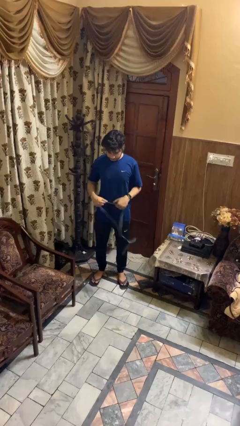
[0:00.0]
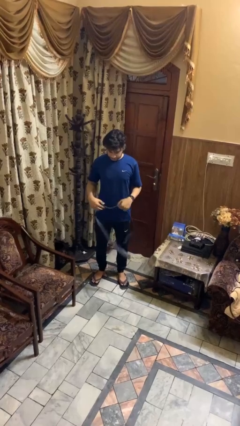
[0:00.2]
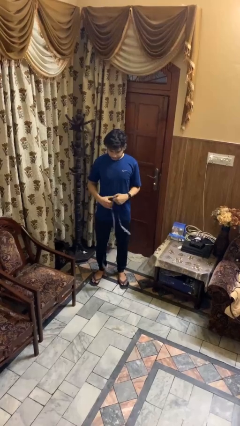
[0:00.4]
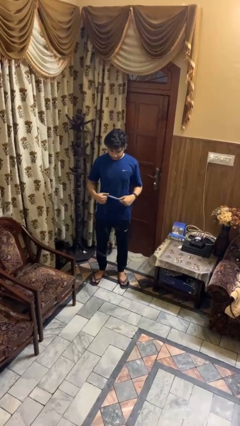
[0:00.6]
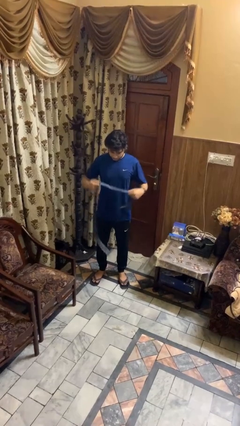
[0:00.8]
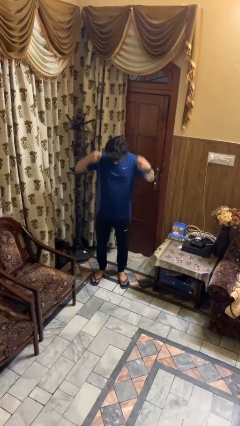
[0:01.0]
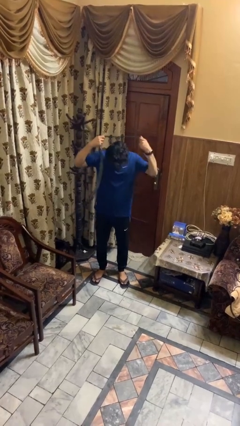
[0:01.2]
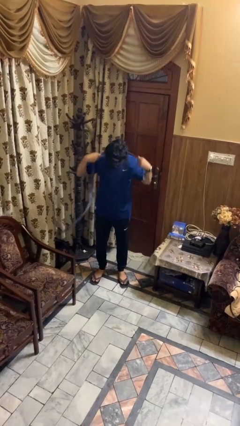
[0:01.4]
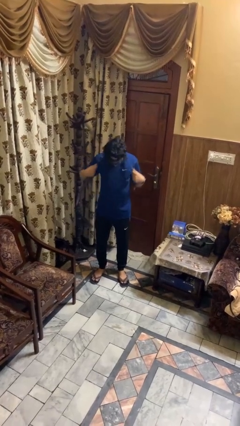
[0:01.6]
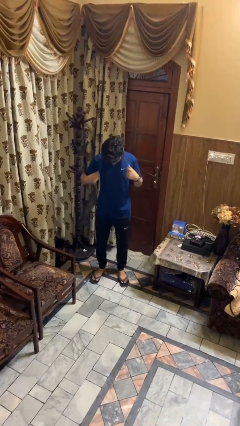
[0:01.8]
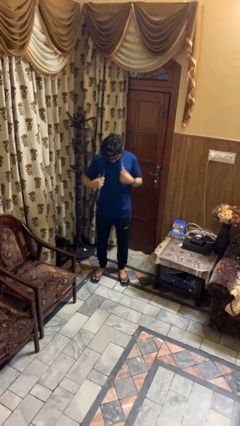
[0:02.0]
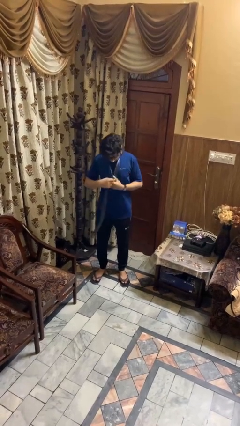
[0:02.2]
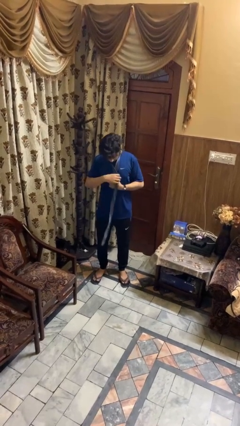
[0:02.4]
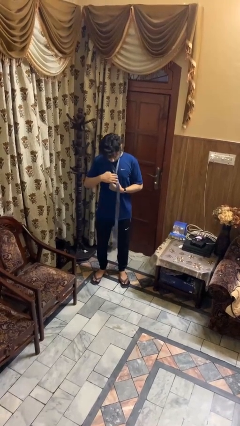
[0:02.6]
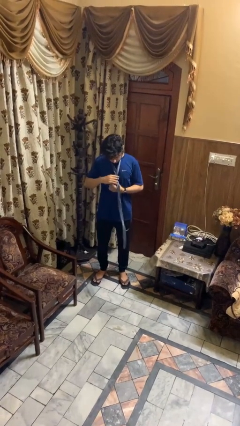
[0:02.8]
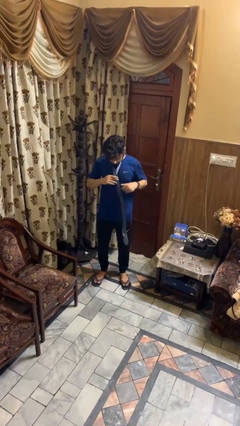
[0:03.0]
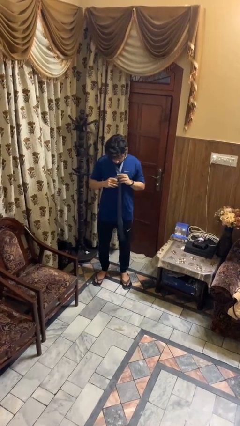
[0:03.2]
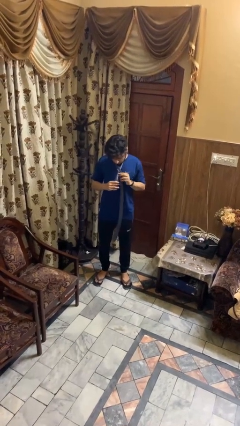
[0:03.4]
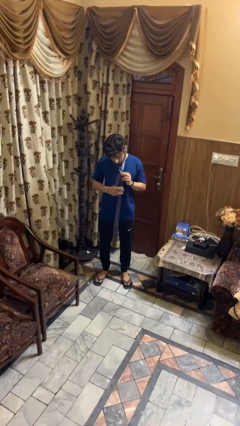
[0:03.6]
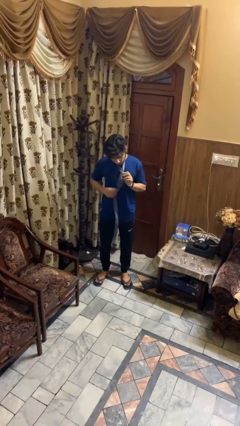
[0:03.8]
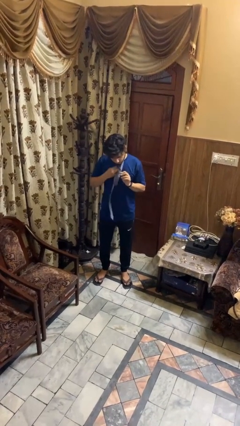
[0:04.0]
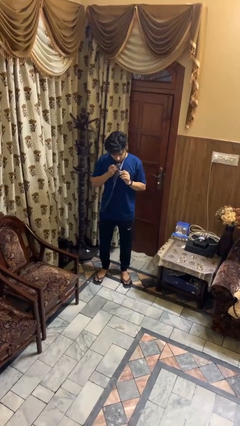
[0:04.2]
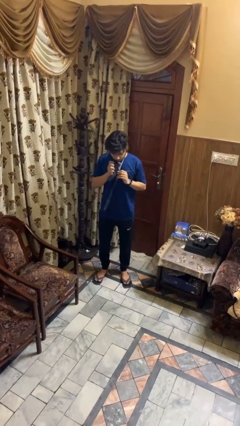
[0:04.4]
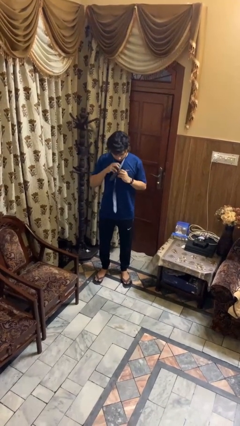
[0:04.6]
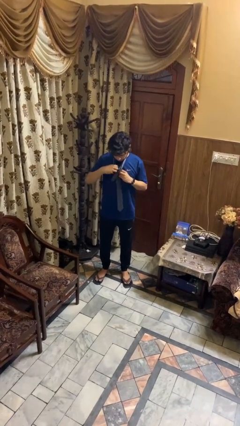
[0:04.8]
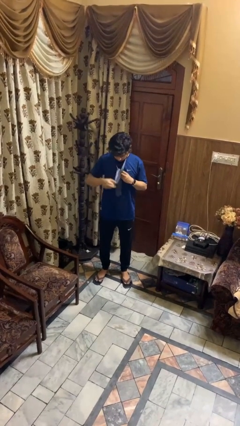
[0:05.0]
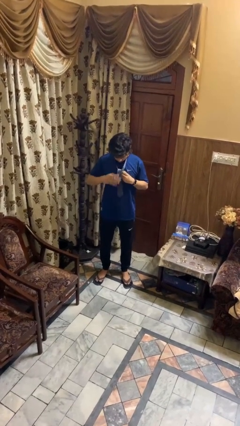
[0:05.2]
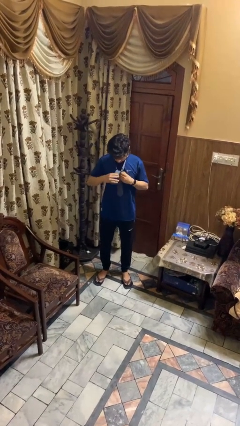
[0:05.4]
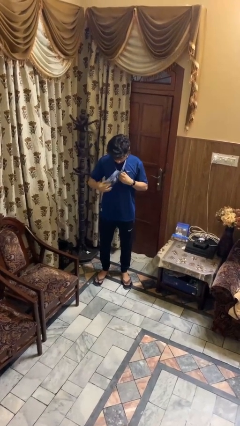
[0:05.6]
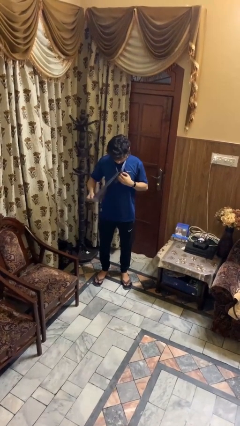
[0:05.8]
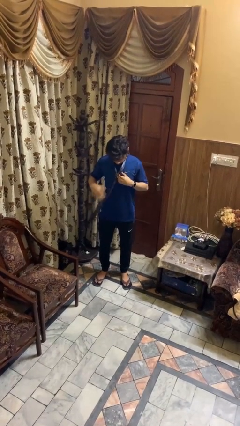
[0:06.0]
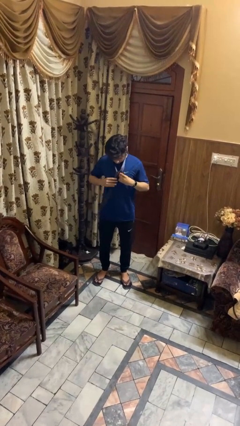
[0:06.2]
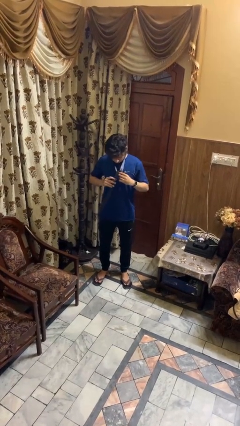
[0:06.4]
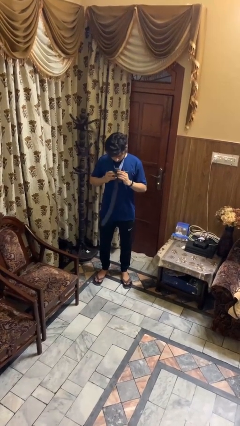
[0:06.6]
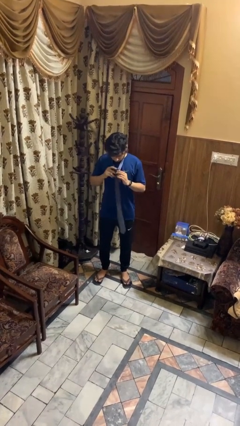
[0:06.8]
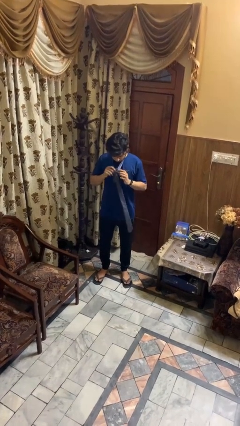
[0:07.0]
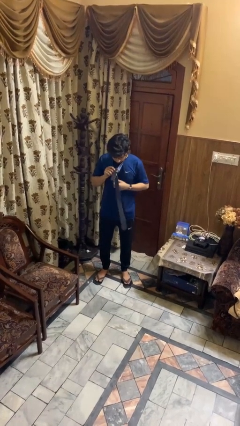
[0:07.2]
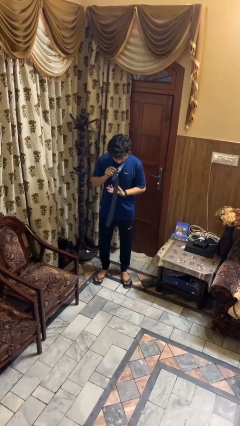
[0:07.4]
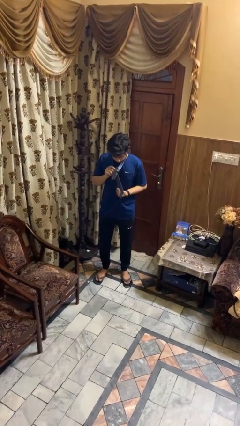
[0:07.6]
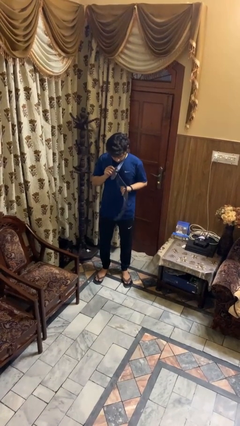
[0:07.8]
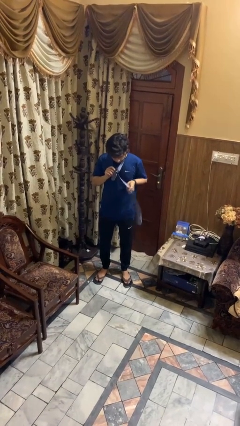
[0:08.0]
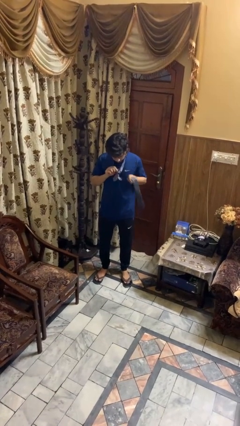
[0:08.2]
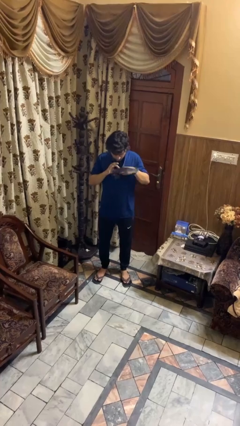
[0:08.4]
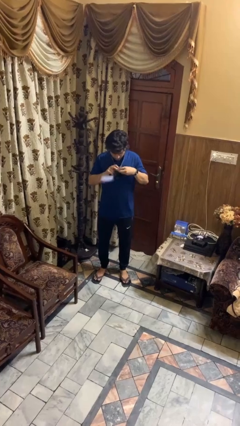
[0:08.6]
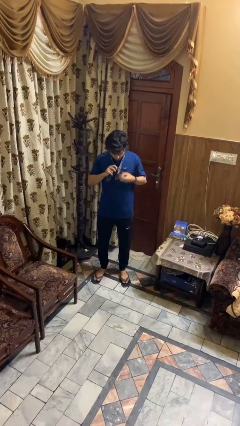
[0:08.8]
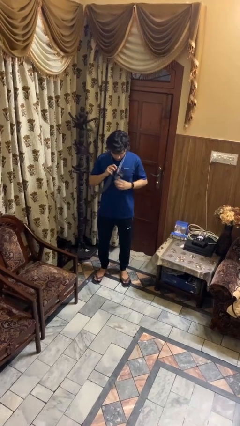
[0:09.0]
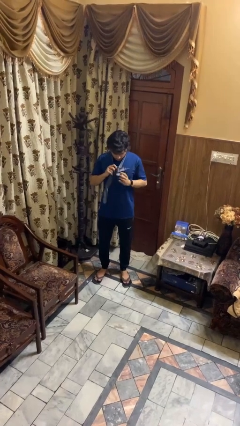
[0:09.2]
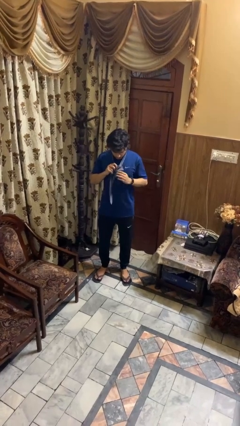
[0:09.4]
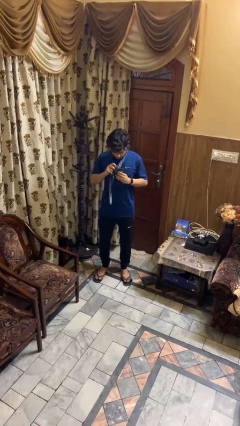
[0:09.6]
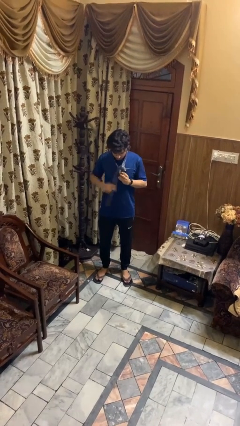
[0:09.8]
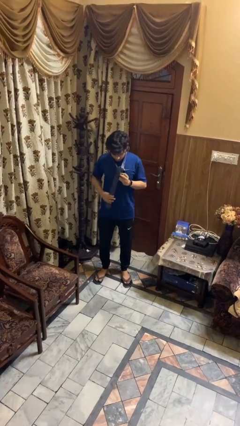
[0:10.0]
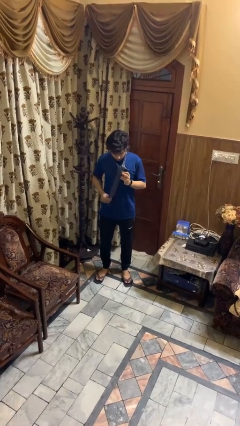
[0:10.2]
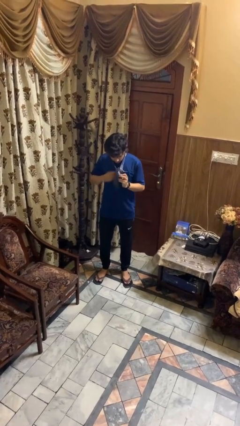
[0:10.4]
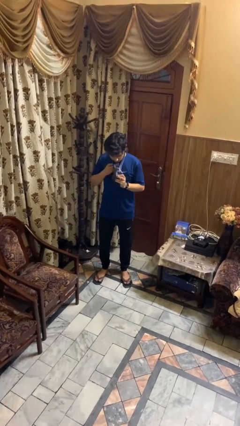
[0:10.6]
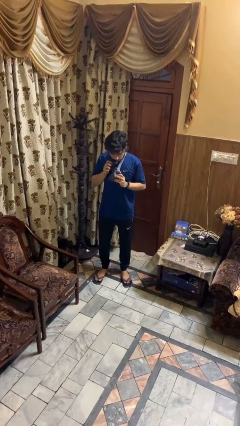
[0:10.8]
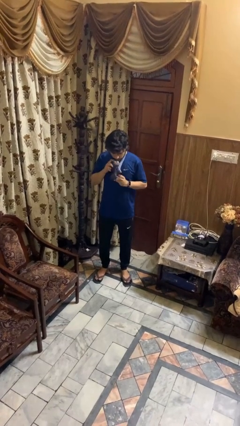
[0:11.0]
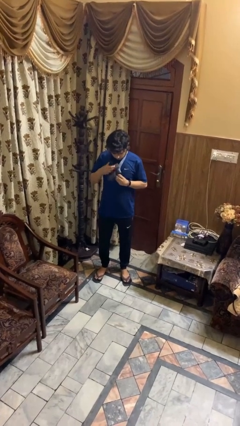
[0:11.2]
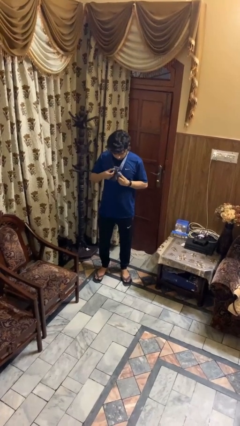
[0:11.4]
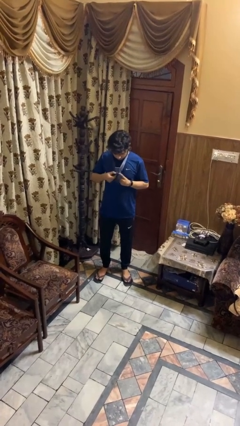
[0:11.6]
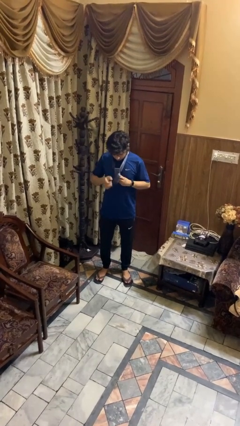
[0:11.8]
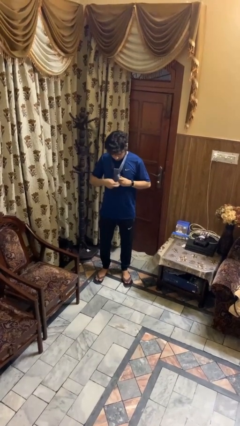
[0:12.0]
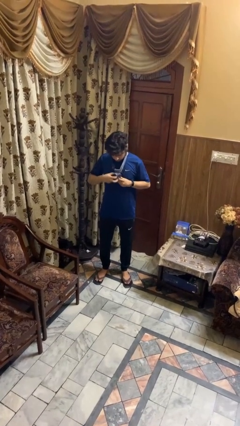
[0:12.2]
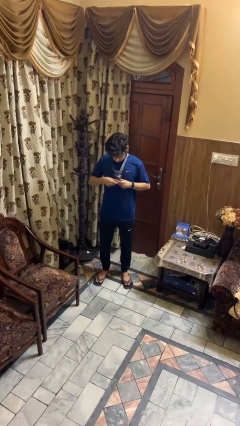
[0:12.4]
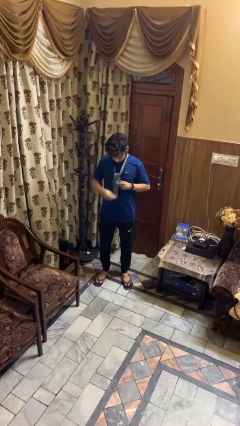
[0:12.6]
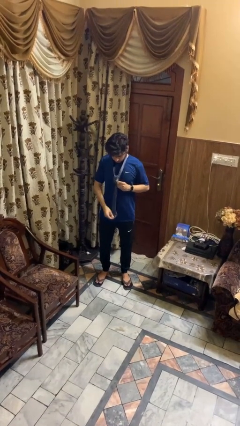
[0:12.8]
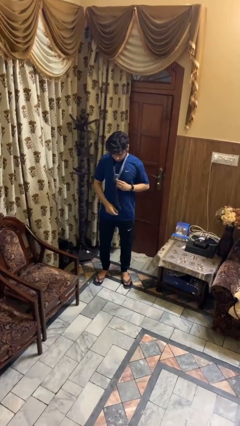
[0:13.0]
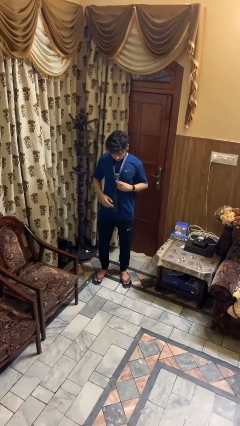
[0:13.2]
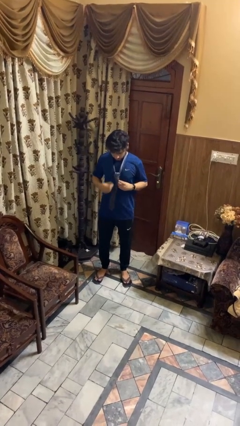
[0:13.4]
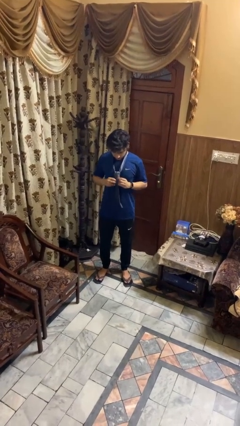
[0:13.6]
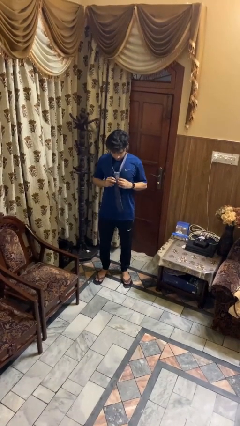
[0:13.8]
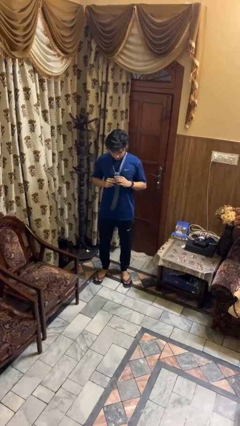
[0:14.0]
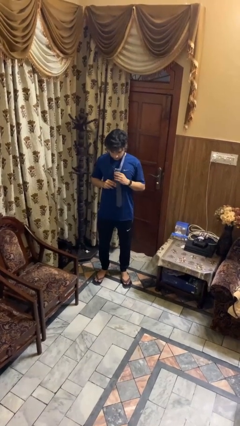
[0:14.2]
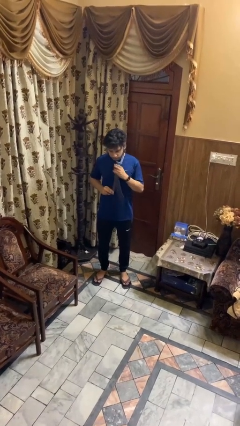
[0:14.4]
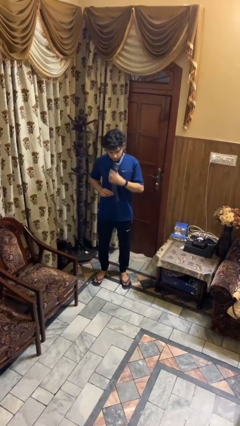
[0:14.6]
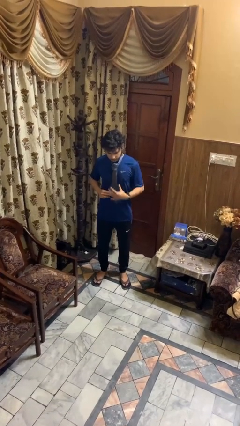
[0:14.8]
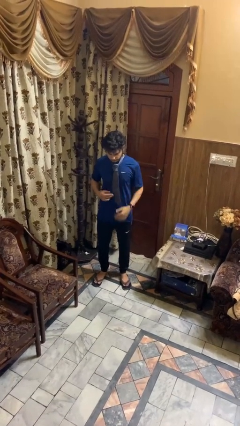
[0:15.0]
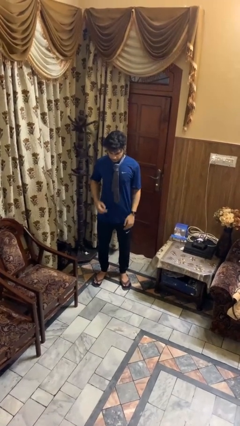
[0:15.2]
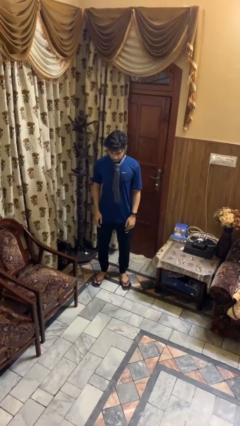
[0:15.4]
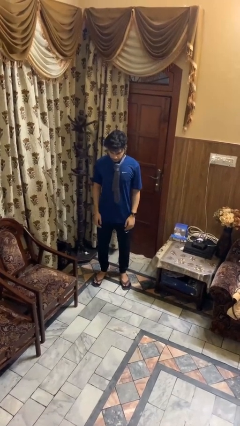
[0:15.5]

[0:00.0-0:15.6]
person puts on necktie

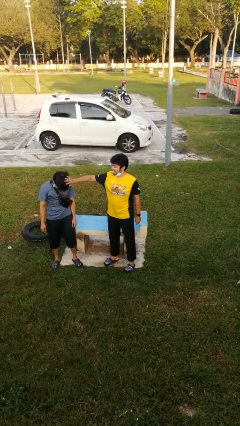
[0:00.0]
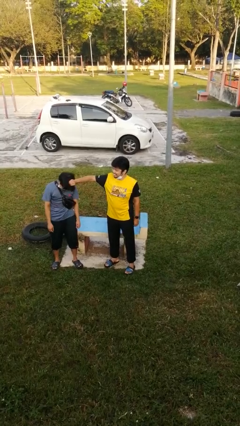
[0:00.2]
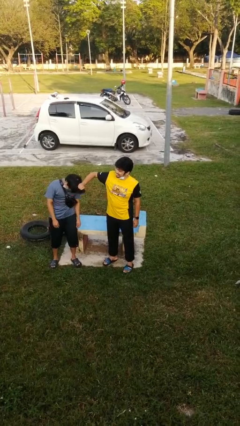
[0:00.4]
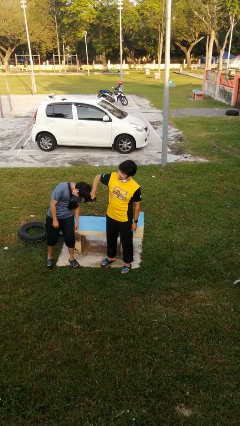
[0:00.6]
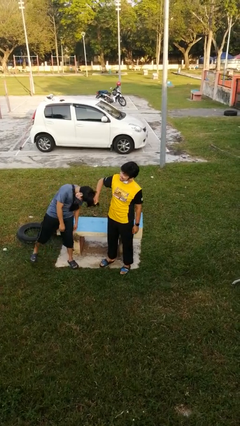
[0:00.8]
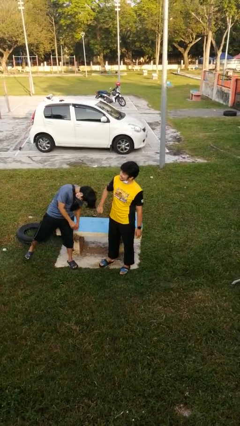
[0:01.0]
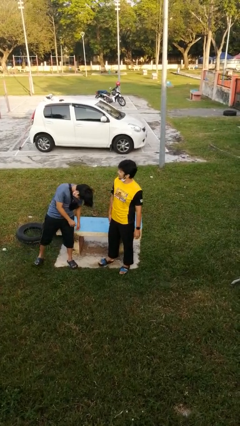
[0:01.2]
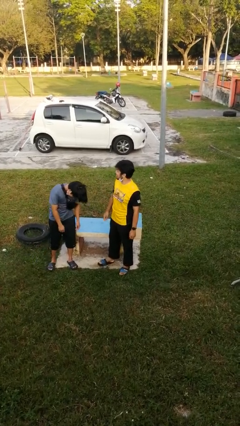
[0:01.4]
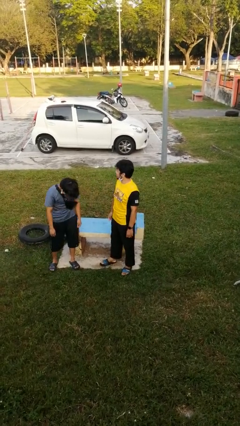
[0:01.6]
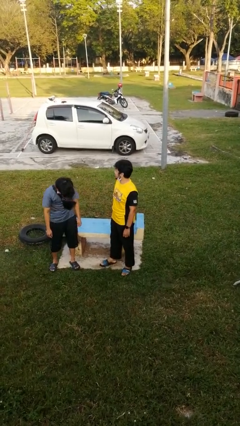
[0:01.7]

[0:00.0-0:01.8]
person grabs person by hair

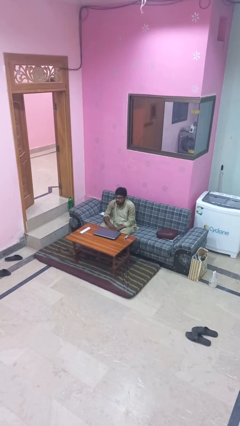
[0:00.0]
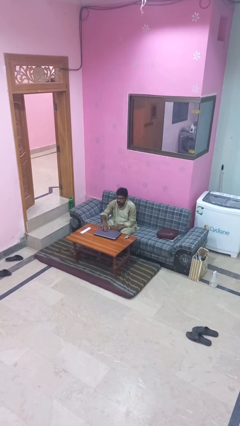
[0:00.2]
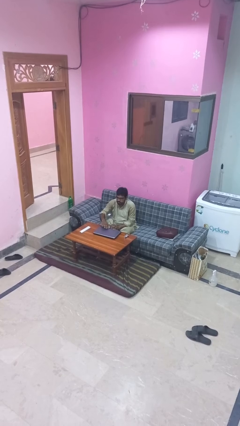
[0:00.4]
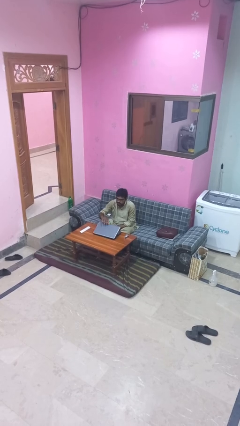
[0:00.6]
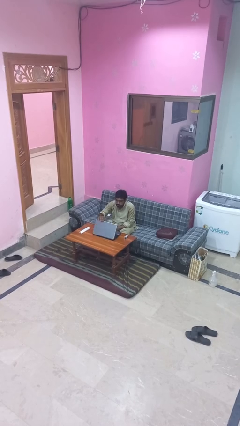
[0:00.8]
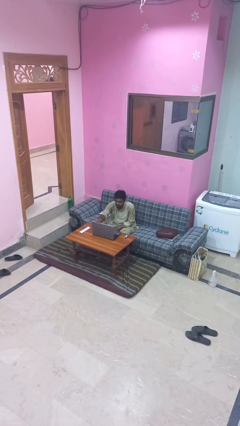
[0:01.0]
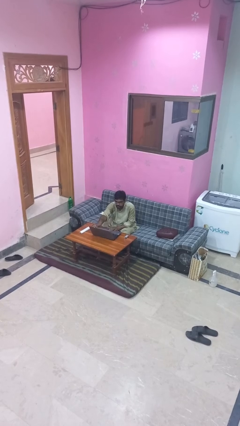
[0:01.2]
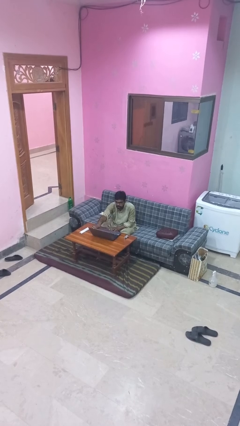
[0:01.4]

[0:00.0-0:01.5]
person opens laptop
